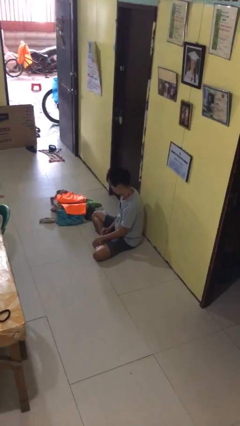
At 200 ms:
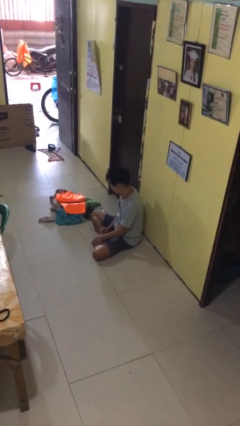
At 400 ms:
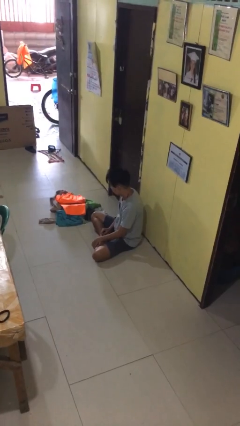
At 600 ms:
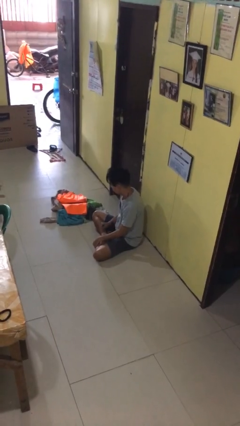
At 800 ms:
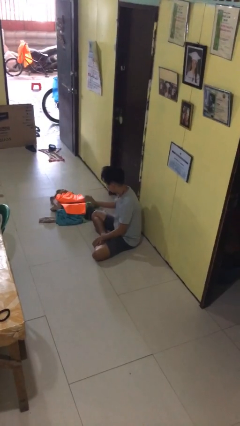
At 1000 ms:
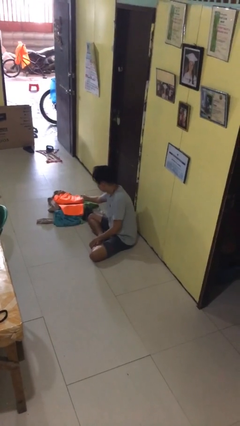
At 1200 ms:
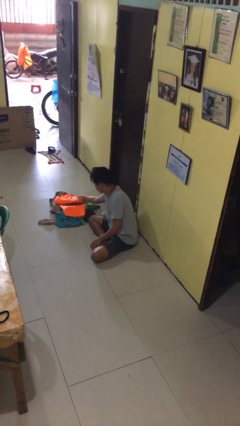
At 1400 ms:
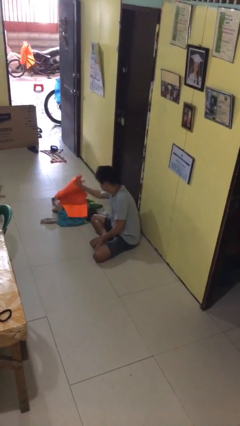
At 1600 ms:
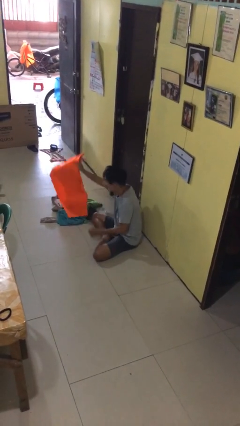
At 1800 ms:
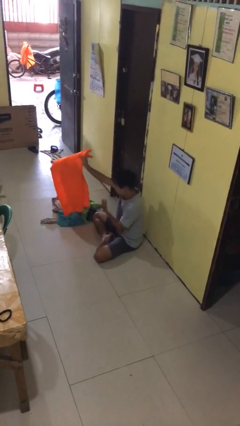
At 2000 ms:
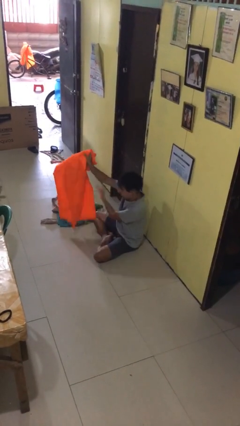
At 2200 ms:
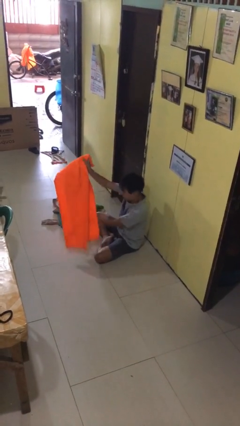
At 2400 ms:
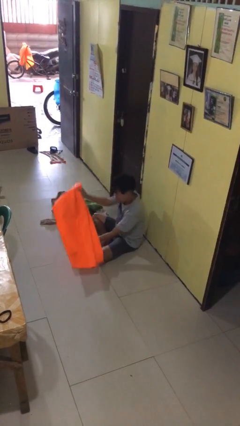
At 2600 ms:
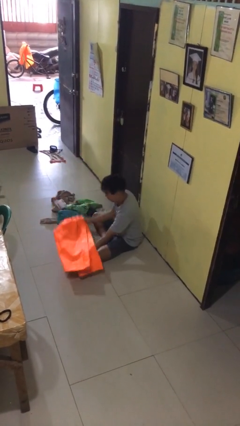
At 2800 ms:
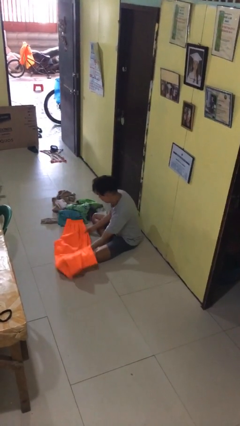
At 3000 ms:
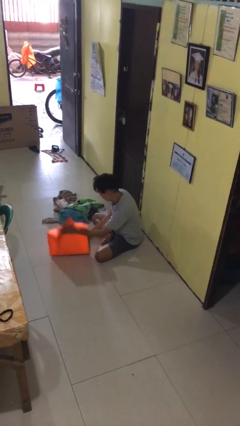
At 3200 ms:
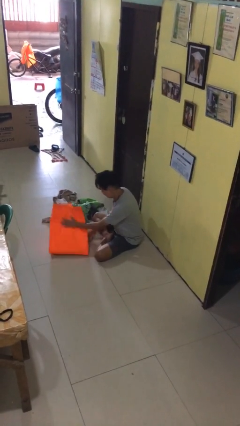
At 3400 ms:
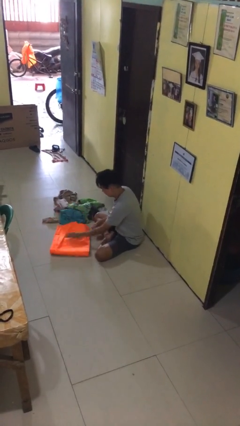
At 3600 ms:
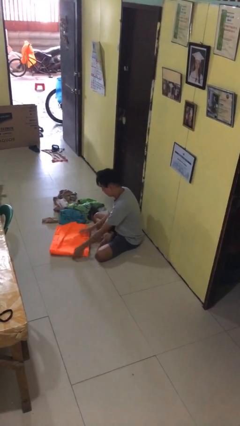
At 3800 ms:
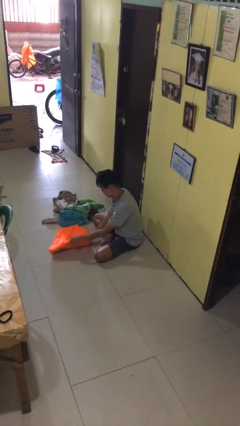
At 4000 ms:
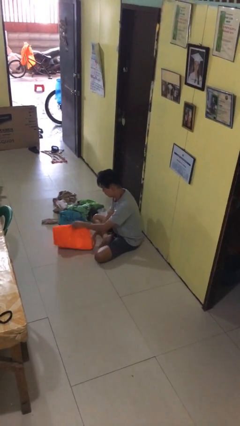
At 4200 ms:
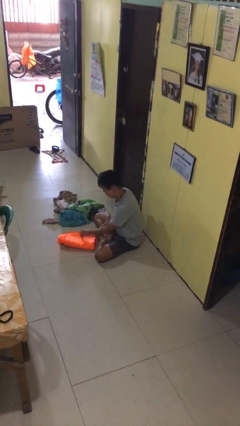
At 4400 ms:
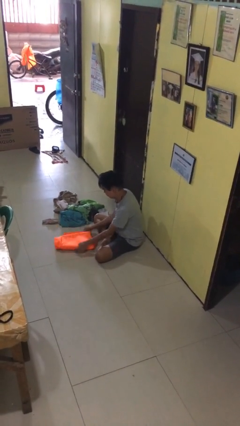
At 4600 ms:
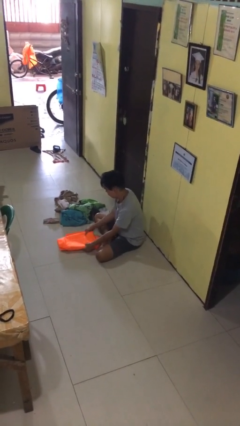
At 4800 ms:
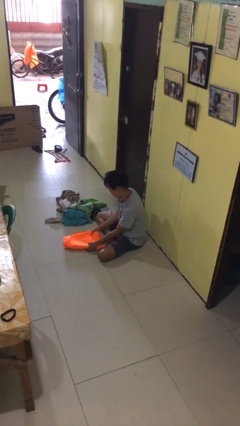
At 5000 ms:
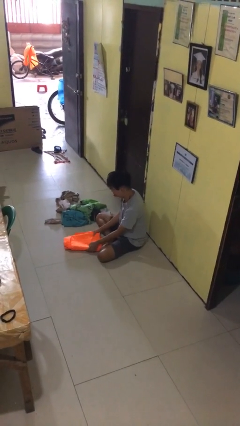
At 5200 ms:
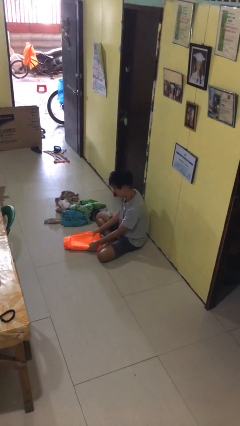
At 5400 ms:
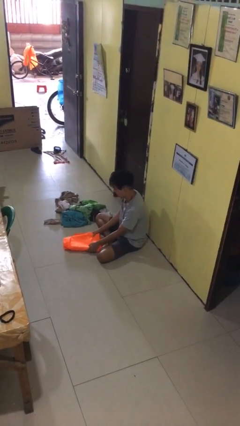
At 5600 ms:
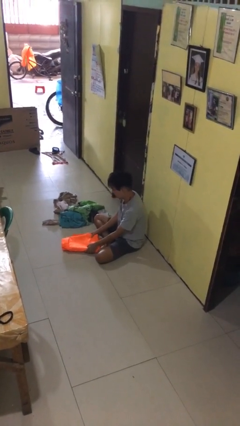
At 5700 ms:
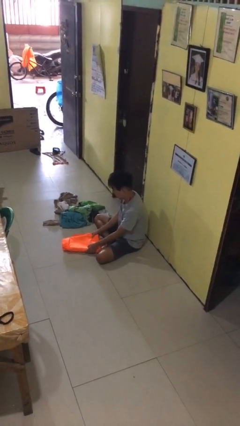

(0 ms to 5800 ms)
person folds pants

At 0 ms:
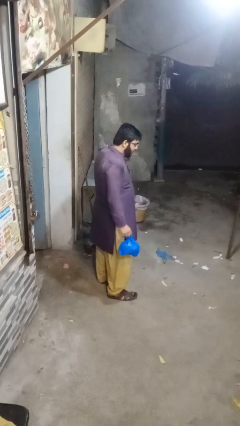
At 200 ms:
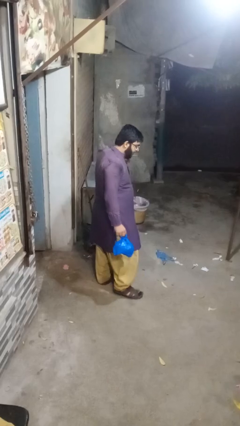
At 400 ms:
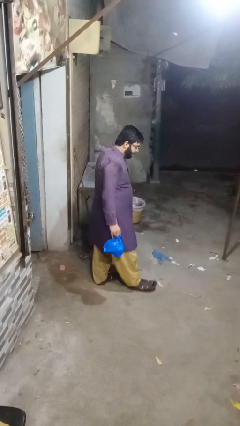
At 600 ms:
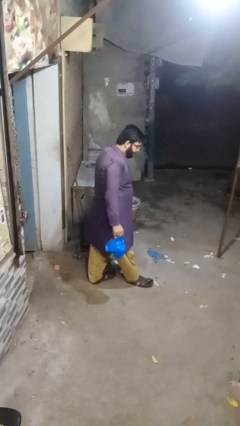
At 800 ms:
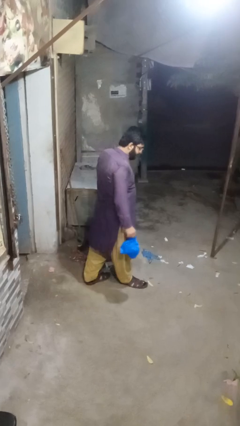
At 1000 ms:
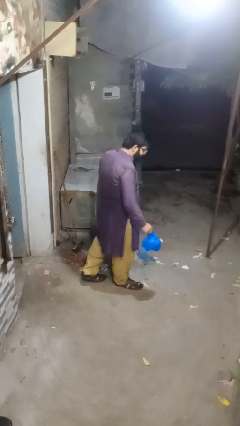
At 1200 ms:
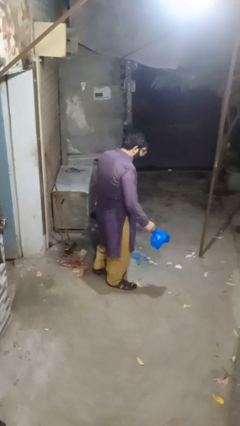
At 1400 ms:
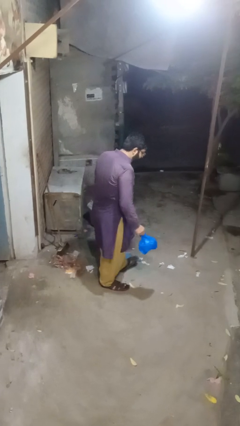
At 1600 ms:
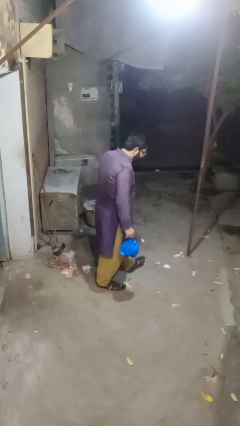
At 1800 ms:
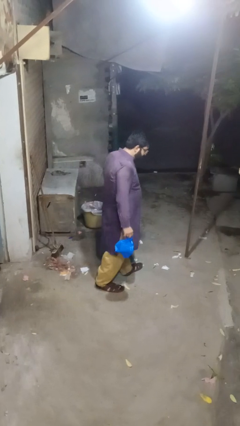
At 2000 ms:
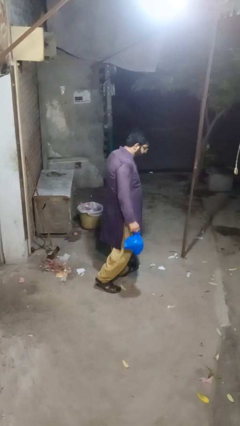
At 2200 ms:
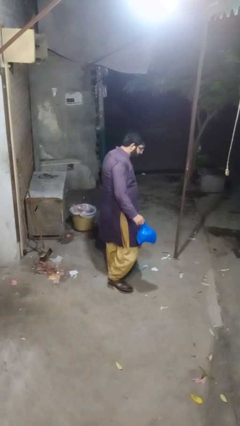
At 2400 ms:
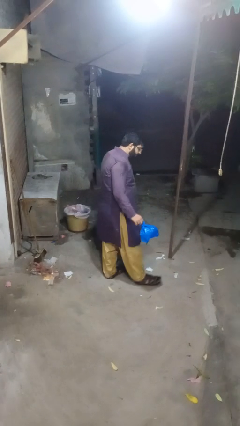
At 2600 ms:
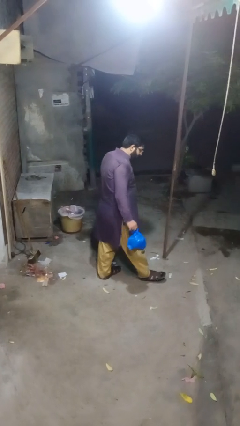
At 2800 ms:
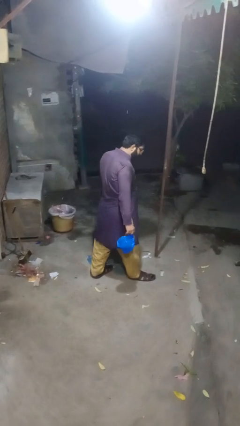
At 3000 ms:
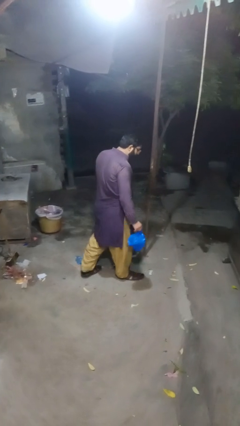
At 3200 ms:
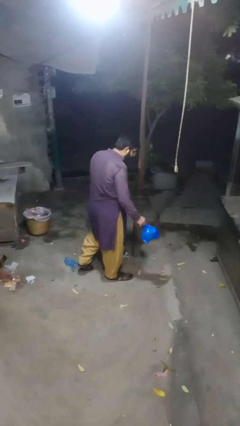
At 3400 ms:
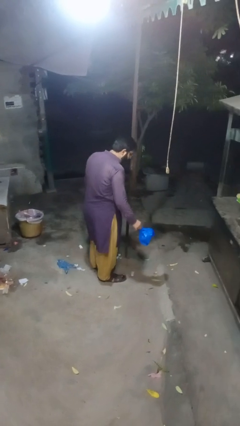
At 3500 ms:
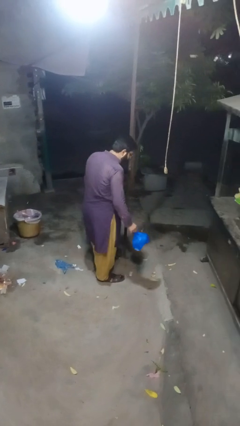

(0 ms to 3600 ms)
person carries groceries

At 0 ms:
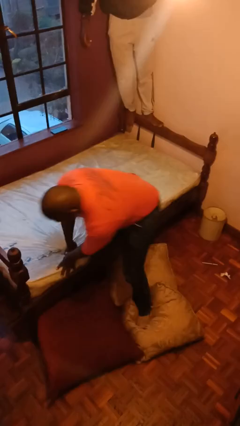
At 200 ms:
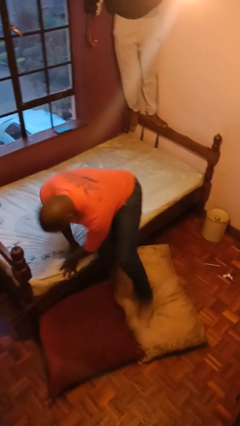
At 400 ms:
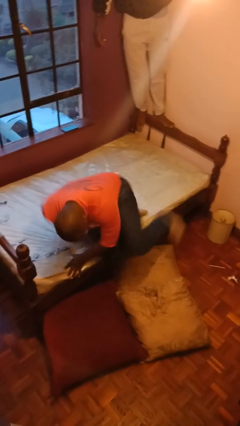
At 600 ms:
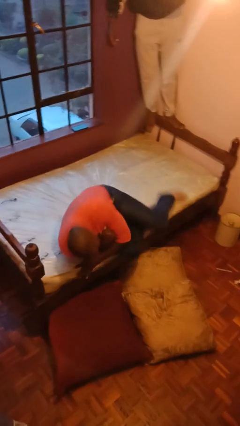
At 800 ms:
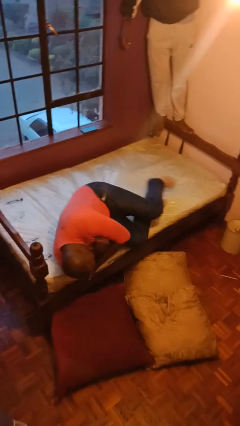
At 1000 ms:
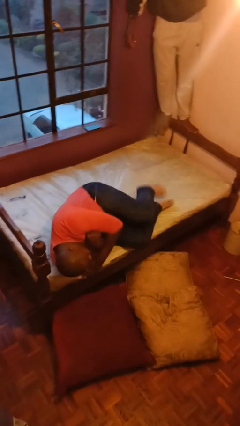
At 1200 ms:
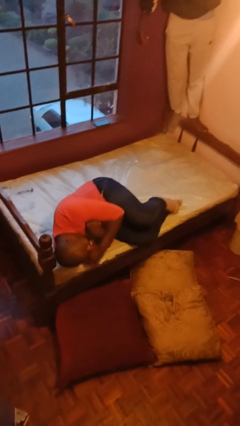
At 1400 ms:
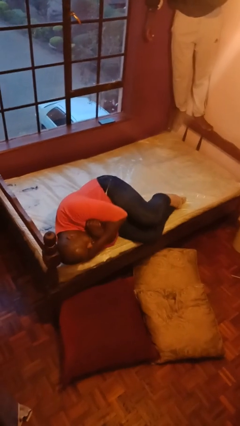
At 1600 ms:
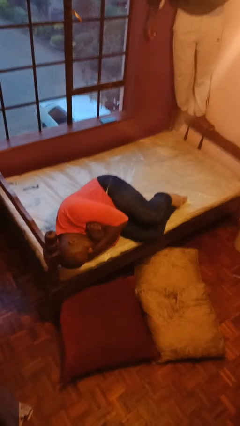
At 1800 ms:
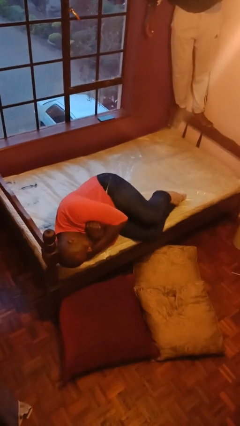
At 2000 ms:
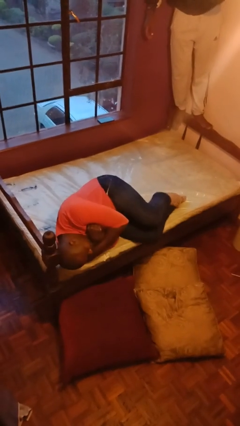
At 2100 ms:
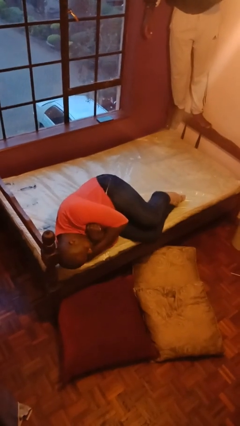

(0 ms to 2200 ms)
person lies down on bed

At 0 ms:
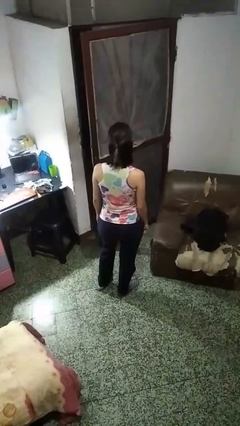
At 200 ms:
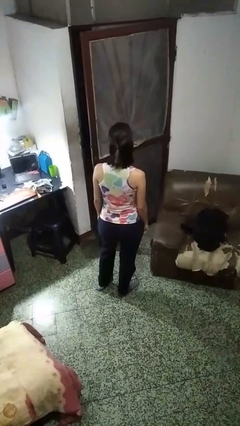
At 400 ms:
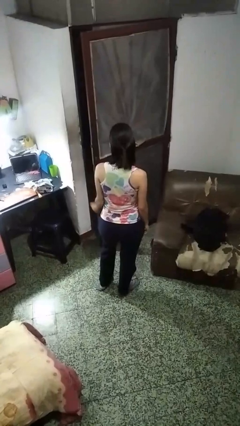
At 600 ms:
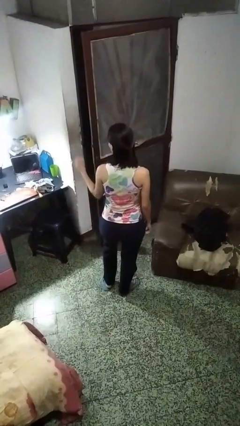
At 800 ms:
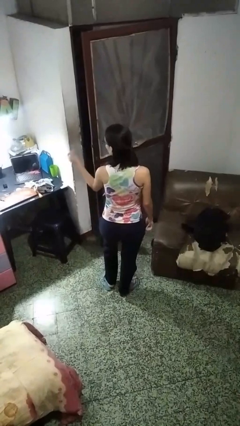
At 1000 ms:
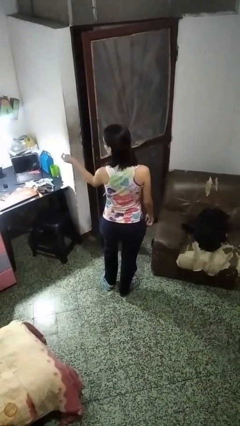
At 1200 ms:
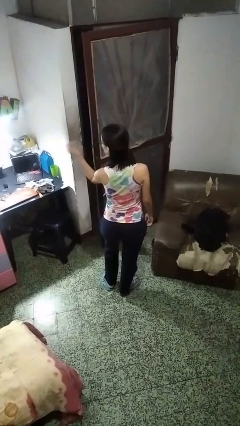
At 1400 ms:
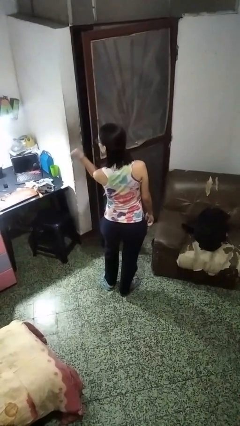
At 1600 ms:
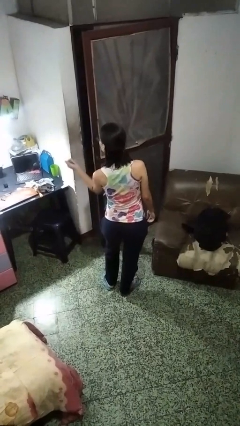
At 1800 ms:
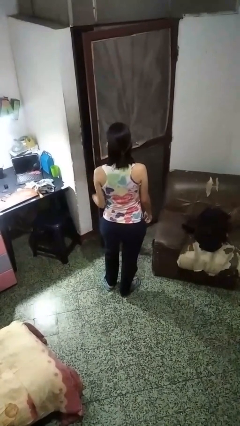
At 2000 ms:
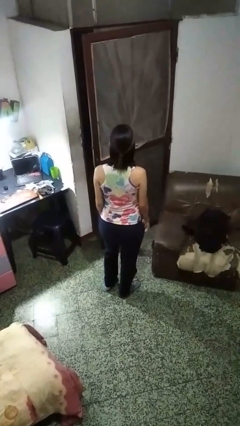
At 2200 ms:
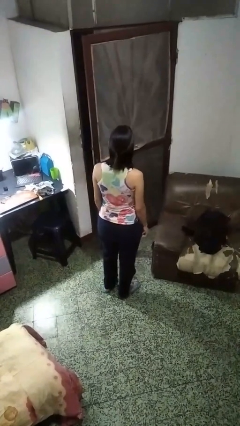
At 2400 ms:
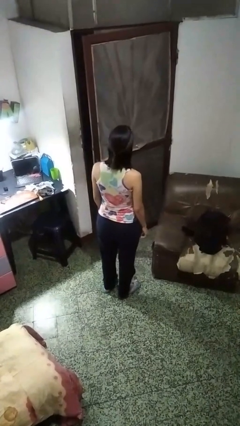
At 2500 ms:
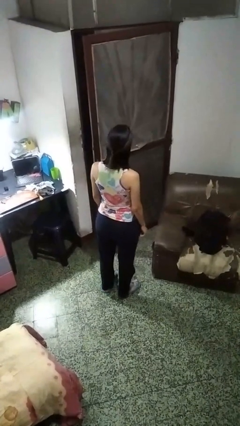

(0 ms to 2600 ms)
person snaps fingers

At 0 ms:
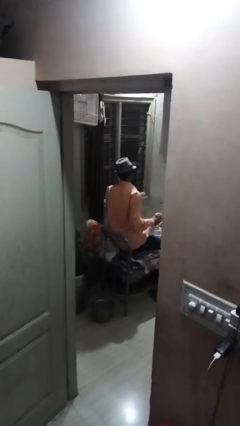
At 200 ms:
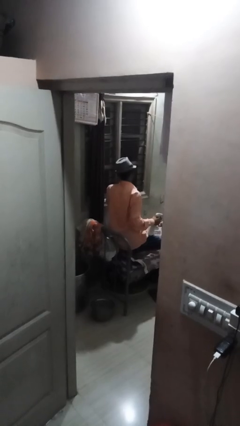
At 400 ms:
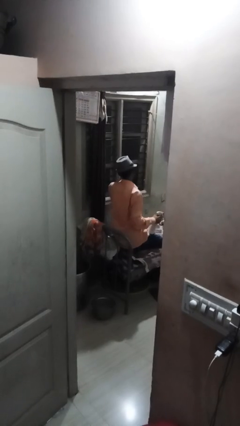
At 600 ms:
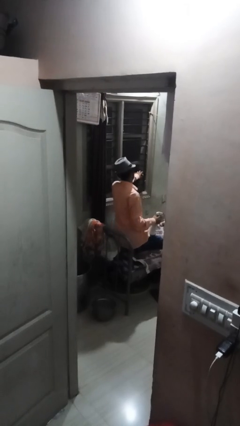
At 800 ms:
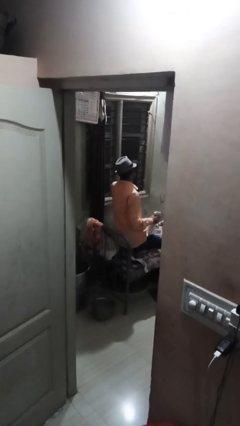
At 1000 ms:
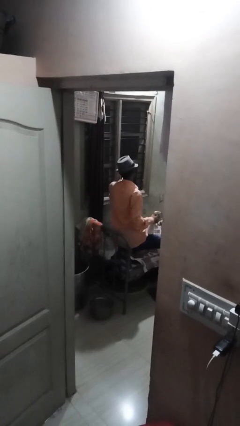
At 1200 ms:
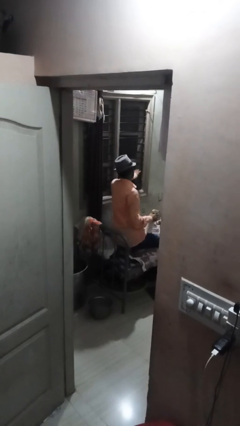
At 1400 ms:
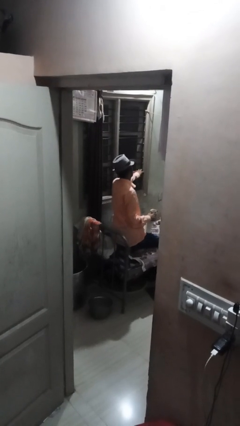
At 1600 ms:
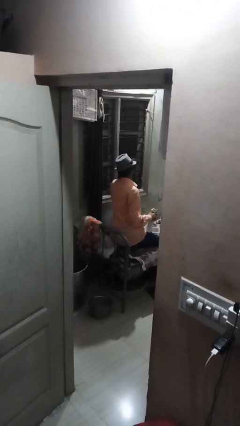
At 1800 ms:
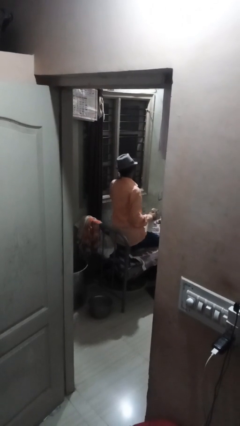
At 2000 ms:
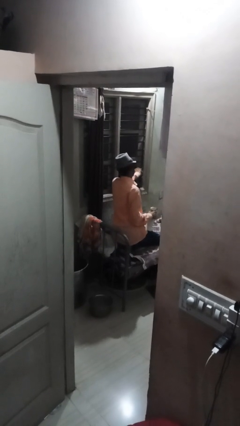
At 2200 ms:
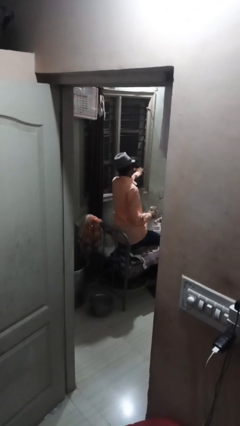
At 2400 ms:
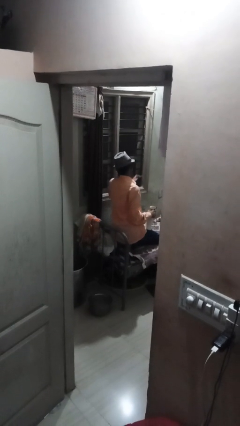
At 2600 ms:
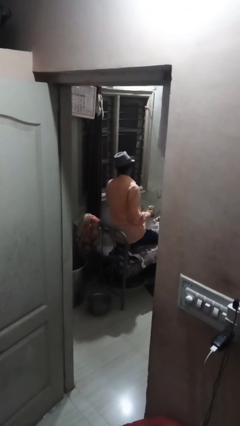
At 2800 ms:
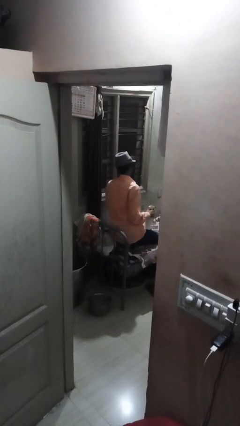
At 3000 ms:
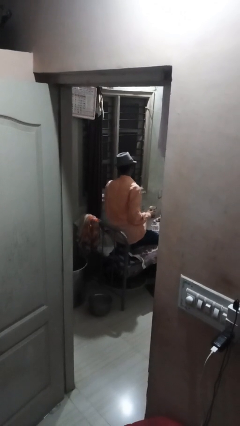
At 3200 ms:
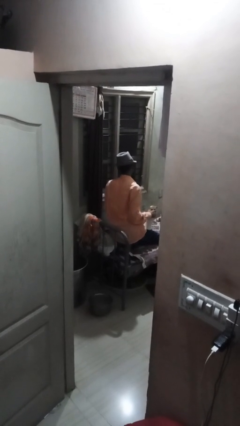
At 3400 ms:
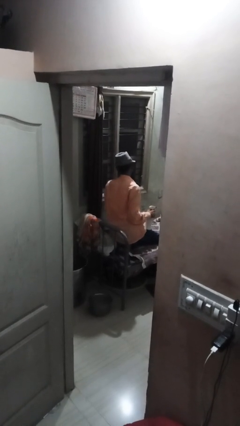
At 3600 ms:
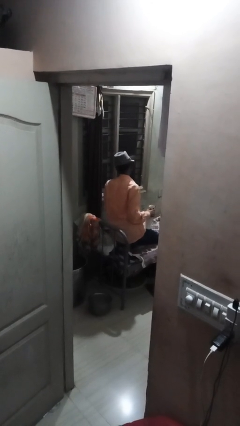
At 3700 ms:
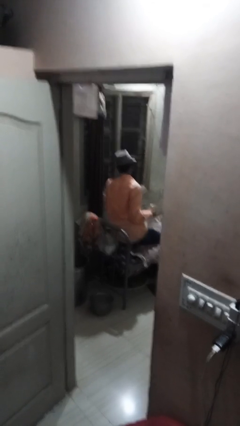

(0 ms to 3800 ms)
person washes window
